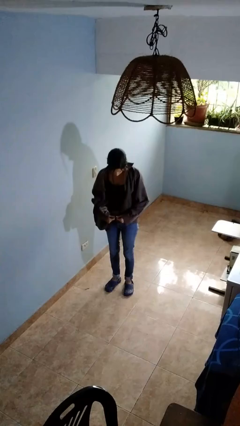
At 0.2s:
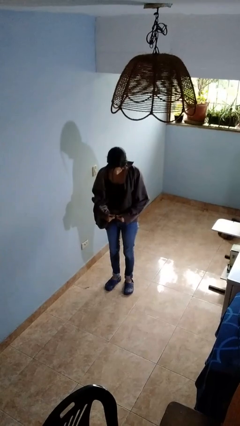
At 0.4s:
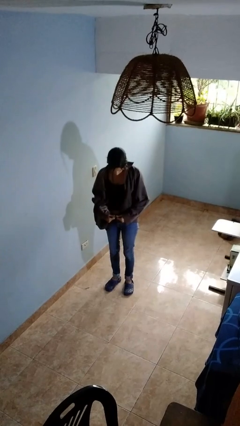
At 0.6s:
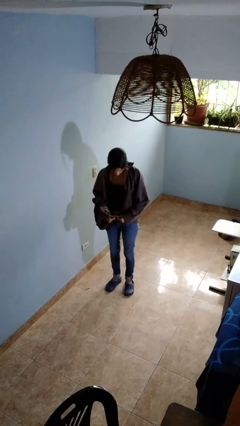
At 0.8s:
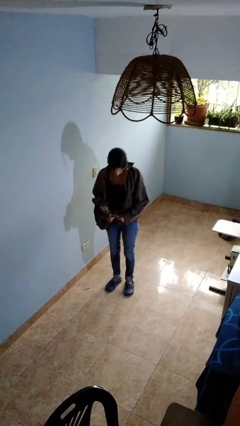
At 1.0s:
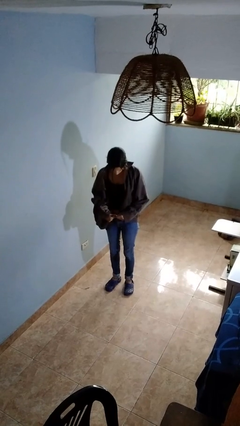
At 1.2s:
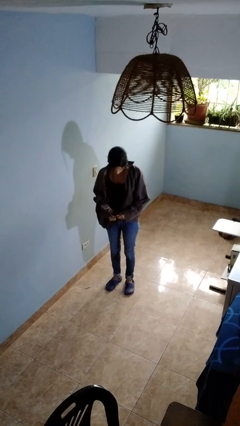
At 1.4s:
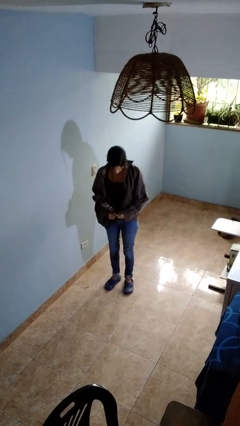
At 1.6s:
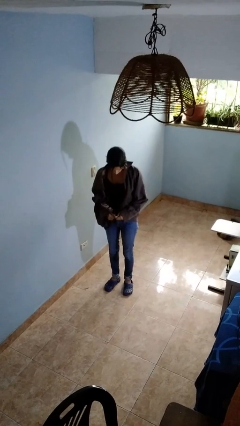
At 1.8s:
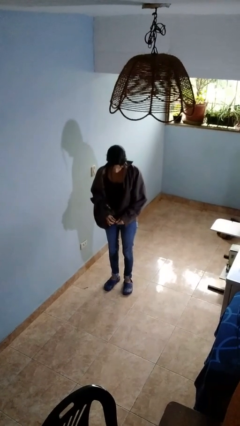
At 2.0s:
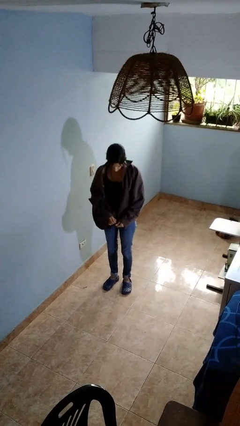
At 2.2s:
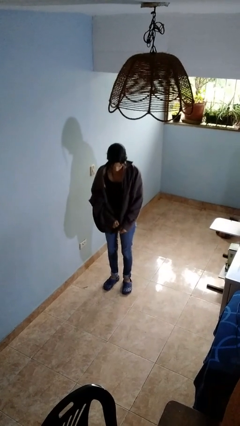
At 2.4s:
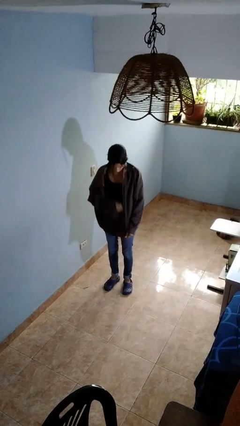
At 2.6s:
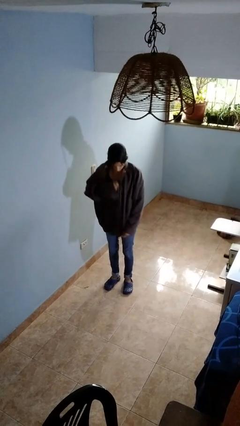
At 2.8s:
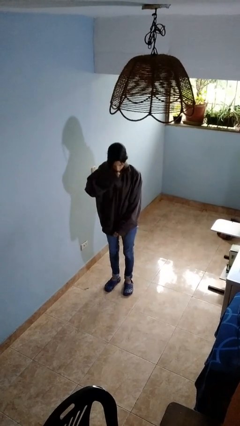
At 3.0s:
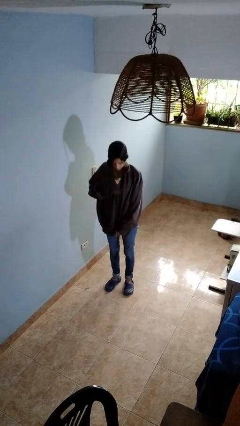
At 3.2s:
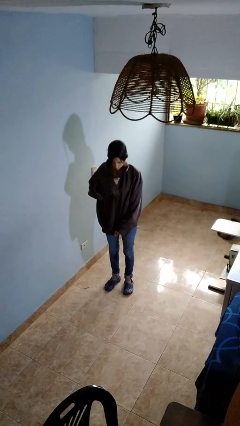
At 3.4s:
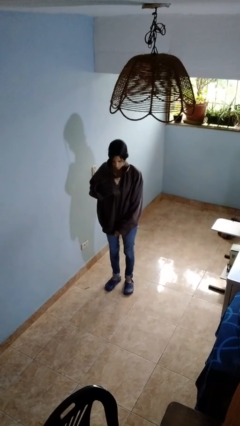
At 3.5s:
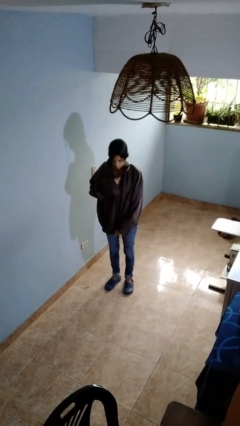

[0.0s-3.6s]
person zips up jacket

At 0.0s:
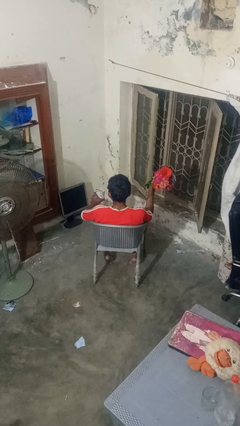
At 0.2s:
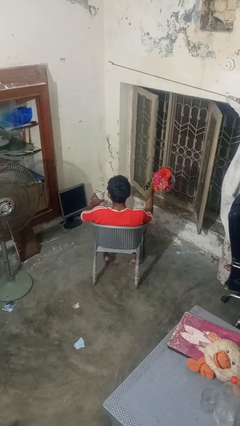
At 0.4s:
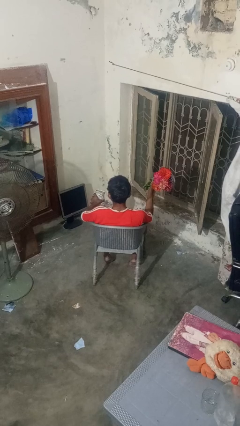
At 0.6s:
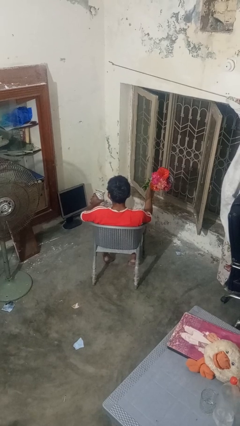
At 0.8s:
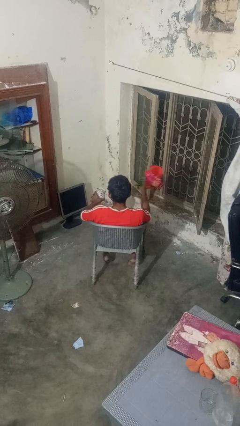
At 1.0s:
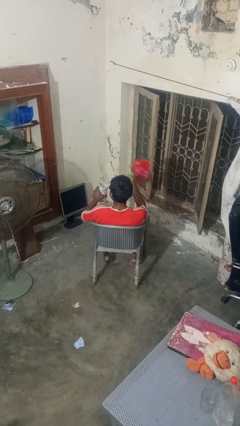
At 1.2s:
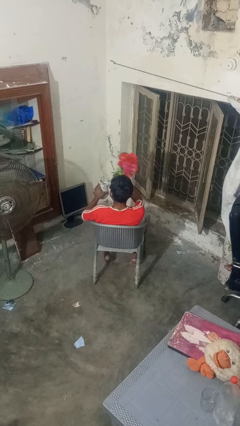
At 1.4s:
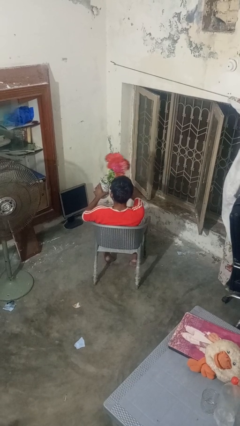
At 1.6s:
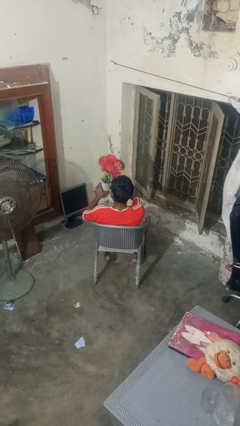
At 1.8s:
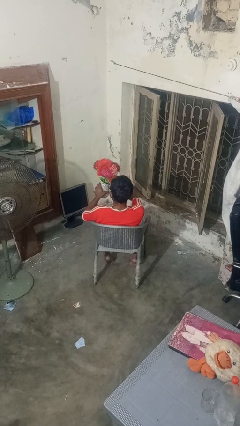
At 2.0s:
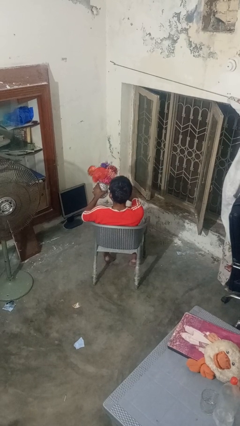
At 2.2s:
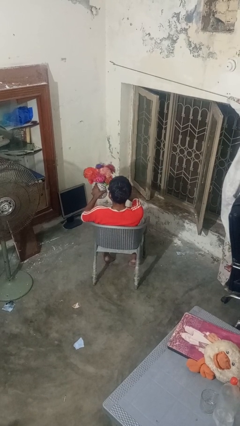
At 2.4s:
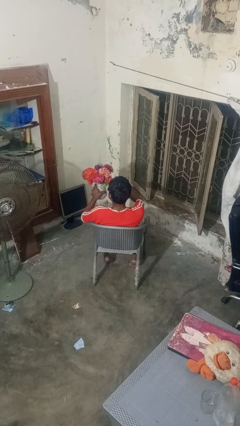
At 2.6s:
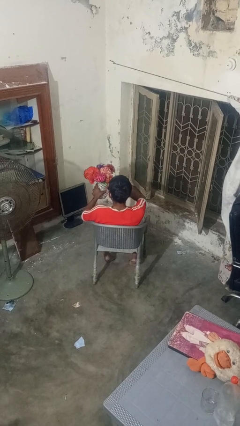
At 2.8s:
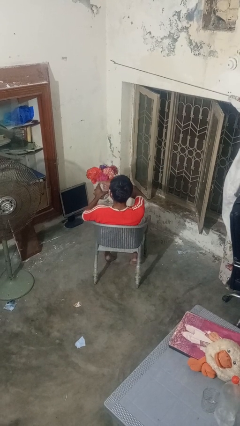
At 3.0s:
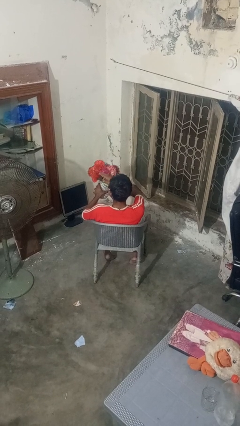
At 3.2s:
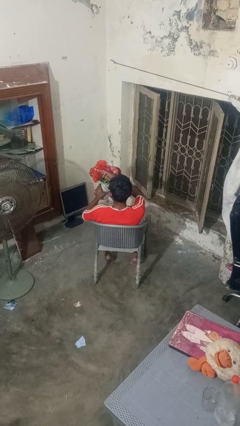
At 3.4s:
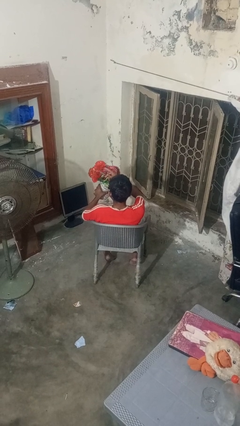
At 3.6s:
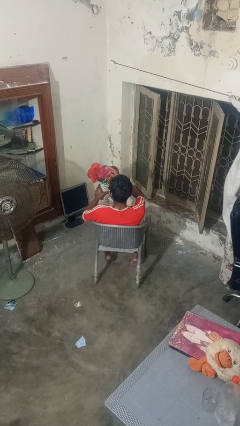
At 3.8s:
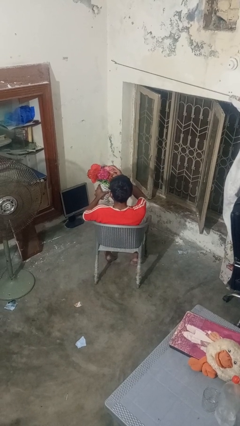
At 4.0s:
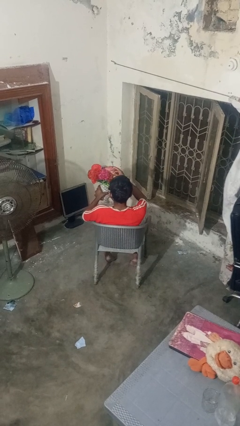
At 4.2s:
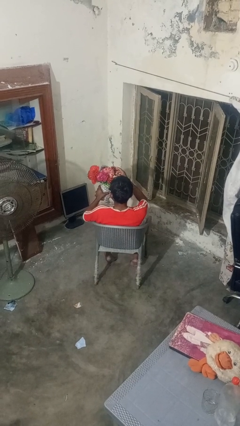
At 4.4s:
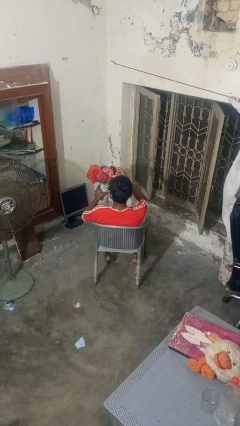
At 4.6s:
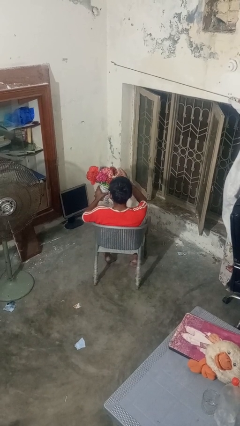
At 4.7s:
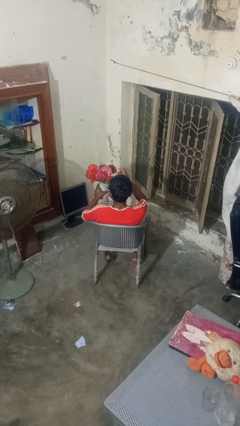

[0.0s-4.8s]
person arranges flowers in vase

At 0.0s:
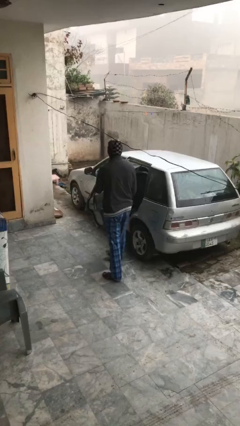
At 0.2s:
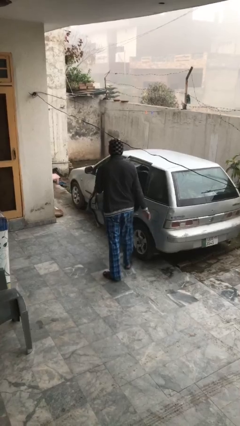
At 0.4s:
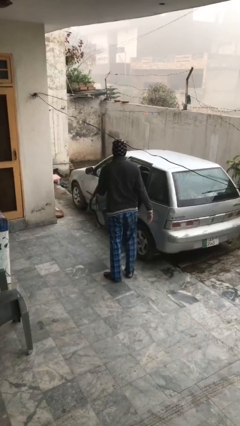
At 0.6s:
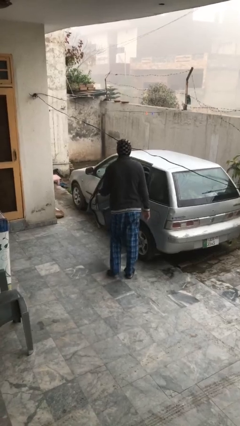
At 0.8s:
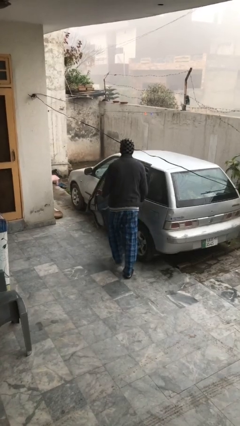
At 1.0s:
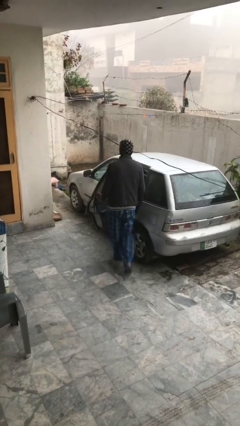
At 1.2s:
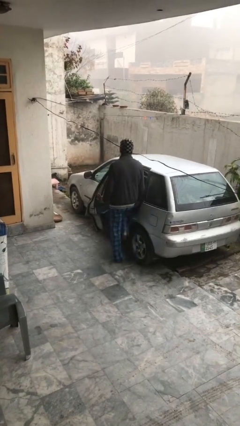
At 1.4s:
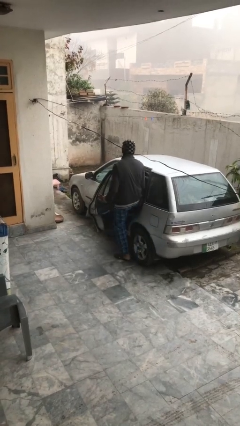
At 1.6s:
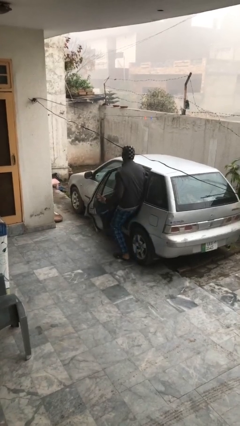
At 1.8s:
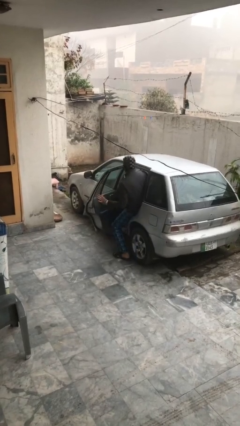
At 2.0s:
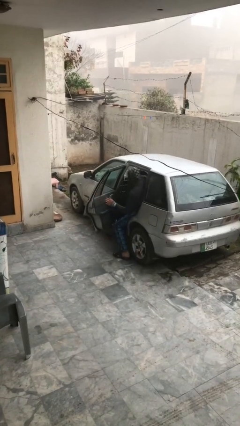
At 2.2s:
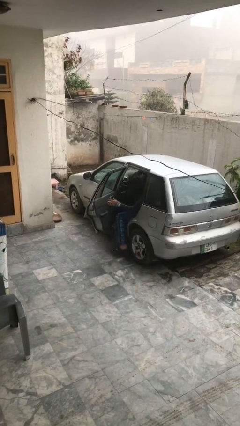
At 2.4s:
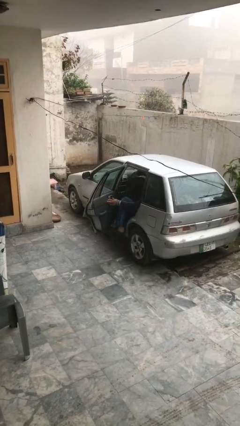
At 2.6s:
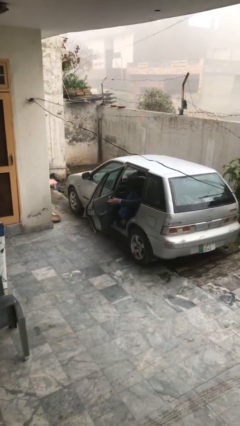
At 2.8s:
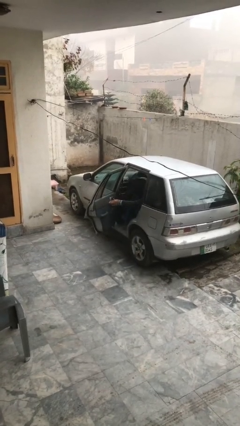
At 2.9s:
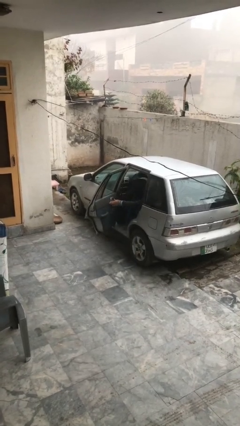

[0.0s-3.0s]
person enters car

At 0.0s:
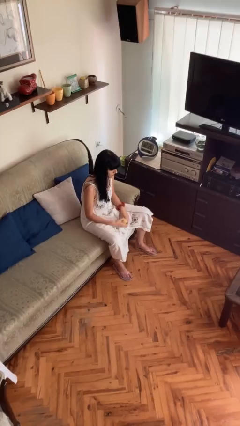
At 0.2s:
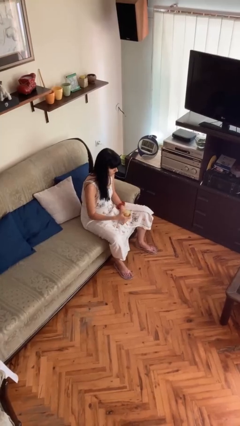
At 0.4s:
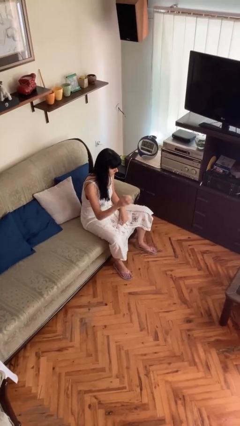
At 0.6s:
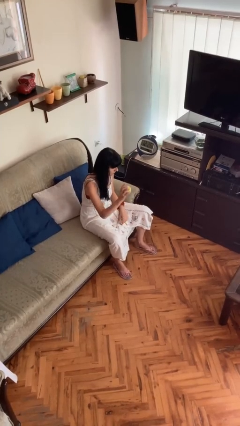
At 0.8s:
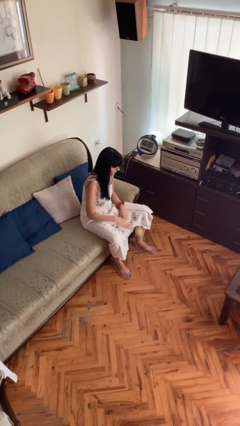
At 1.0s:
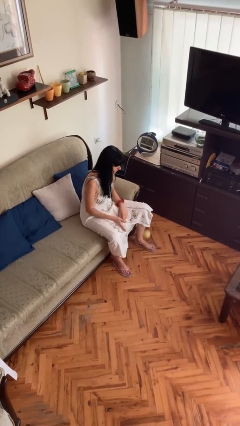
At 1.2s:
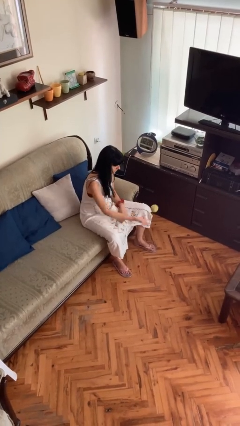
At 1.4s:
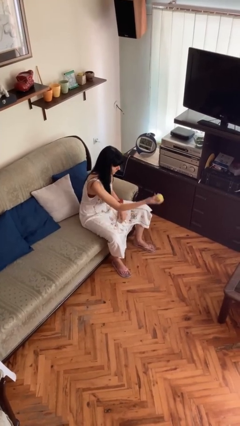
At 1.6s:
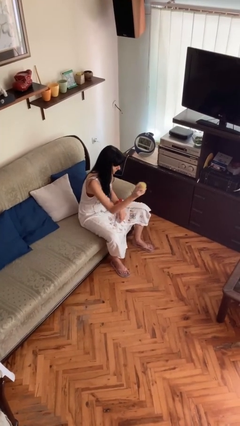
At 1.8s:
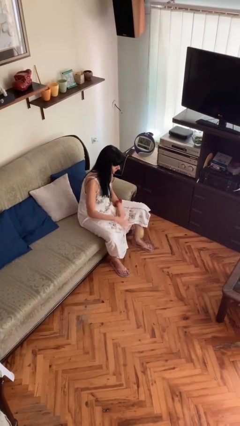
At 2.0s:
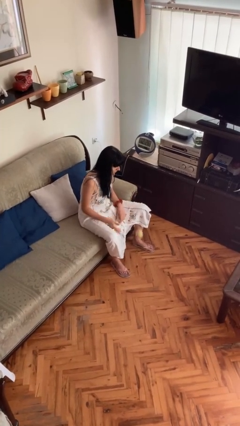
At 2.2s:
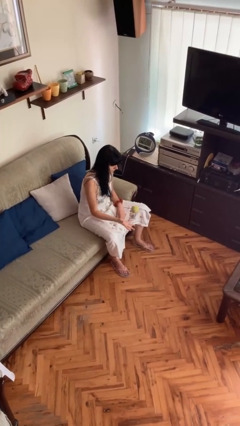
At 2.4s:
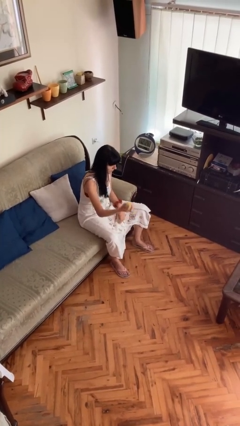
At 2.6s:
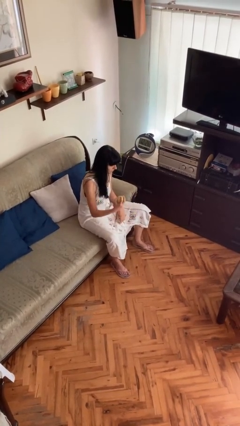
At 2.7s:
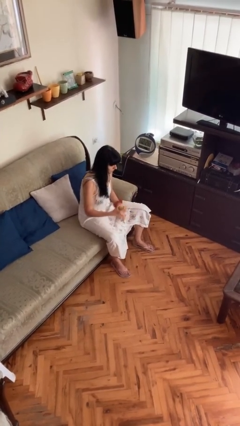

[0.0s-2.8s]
person bounces ball on floor

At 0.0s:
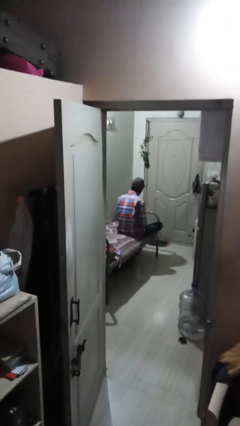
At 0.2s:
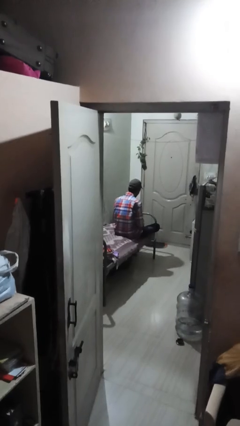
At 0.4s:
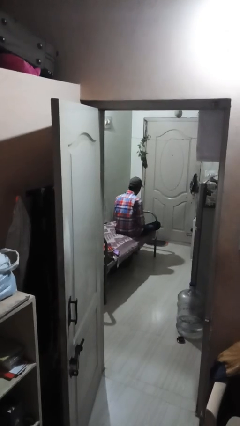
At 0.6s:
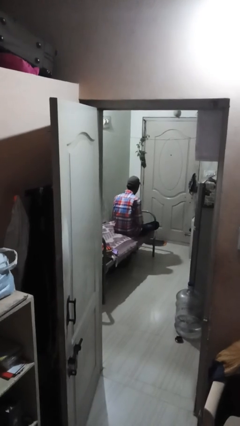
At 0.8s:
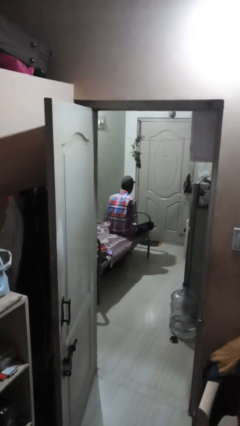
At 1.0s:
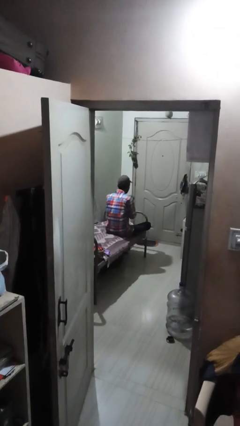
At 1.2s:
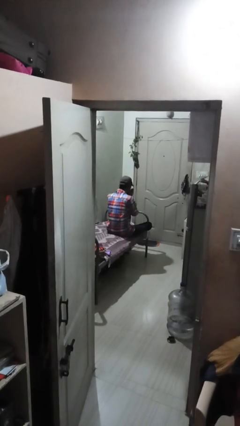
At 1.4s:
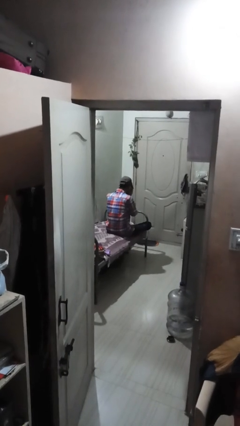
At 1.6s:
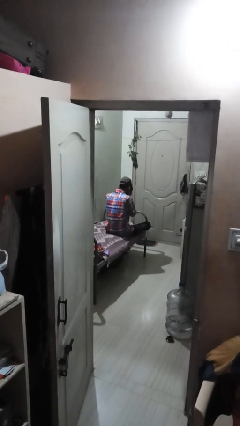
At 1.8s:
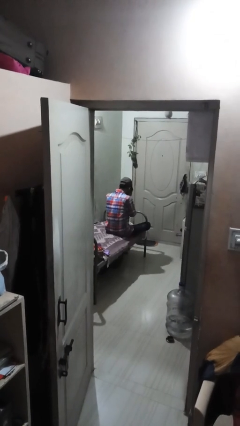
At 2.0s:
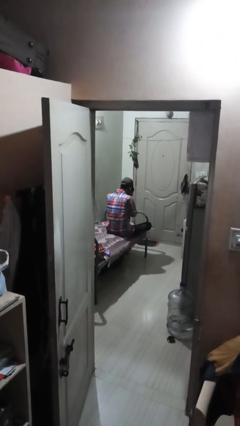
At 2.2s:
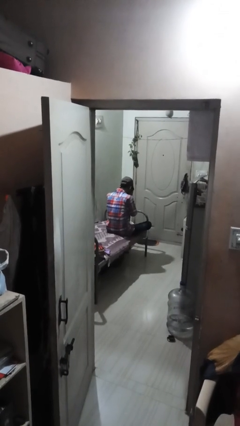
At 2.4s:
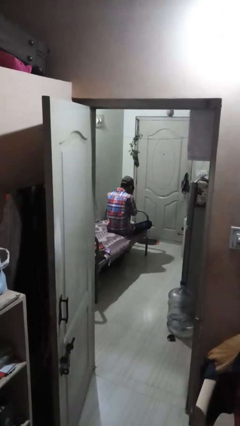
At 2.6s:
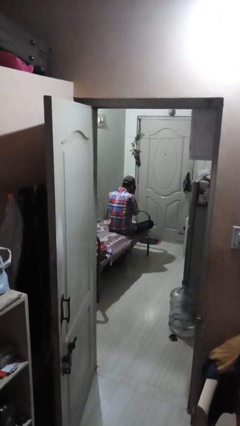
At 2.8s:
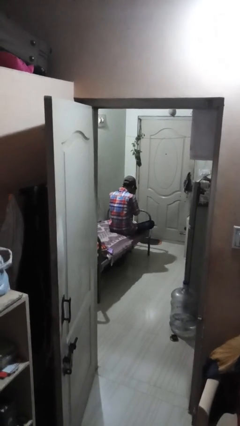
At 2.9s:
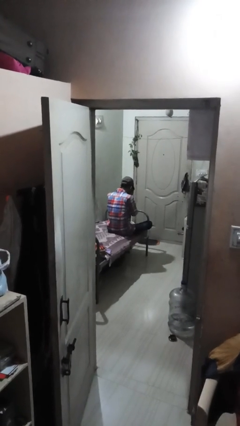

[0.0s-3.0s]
person prays

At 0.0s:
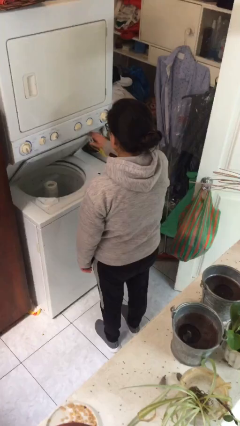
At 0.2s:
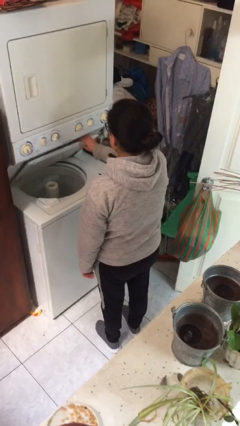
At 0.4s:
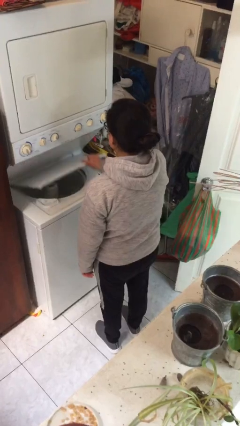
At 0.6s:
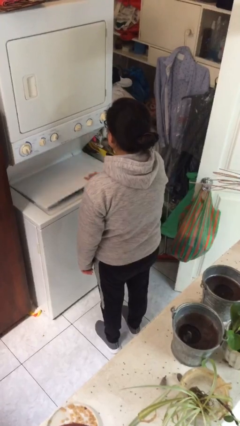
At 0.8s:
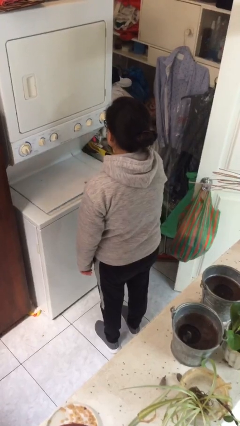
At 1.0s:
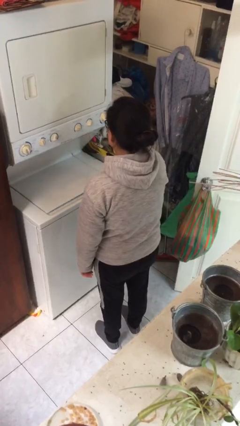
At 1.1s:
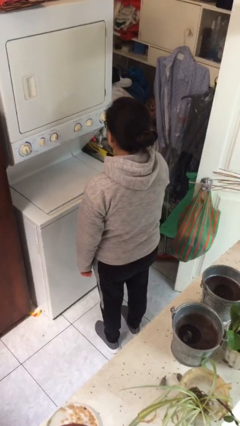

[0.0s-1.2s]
person closes clothes washer
